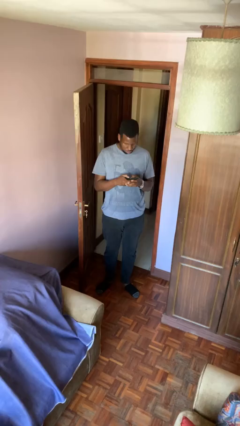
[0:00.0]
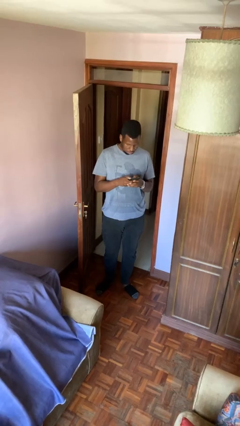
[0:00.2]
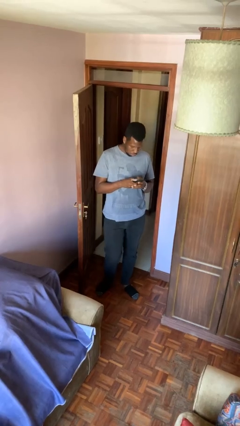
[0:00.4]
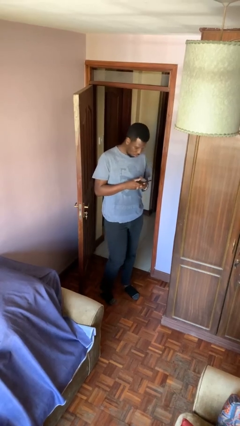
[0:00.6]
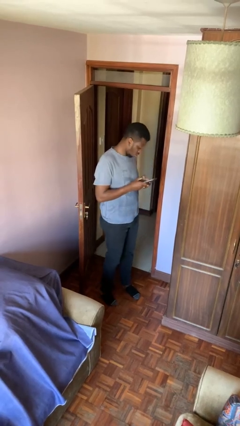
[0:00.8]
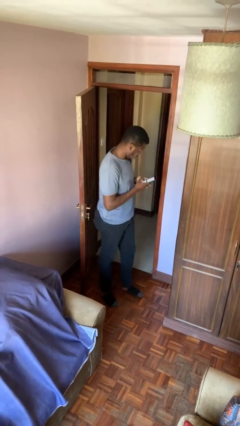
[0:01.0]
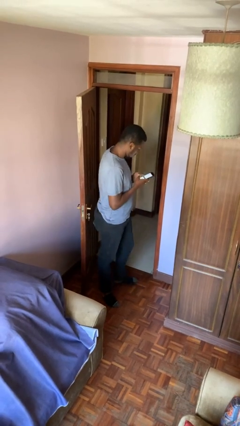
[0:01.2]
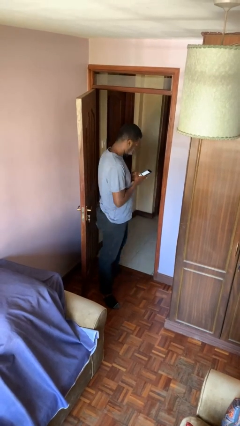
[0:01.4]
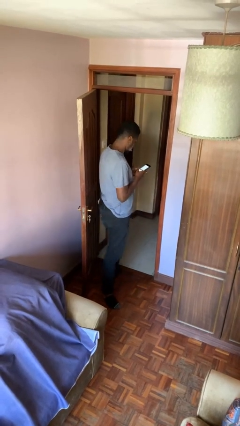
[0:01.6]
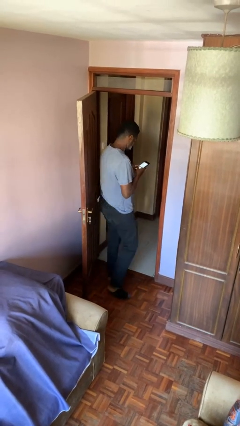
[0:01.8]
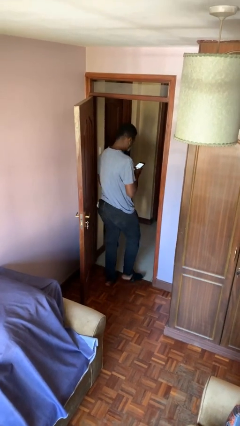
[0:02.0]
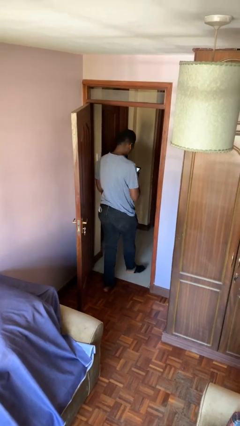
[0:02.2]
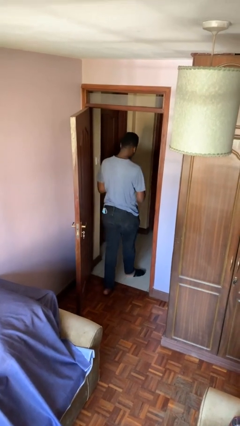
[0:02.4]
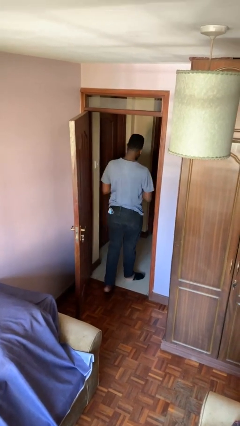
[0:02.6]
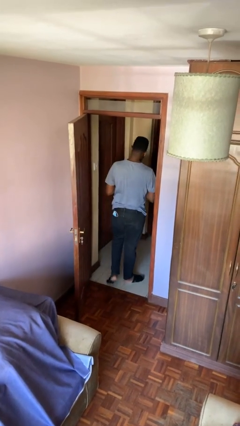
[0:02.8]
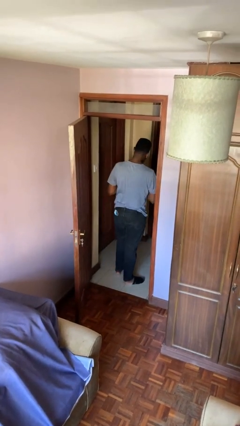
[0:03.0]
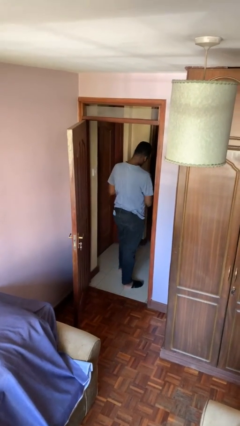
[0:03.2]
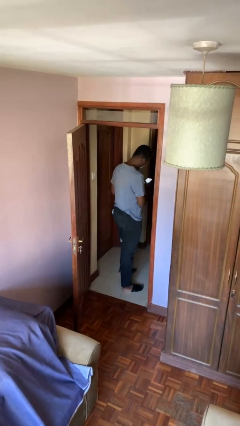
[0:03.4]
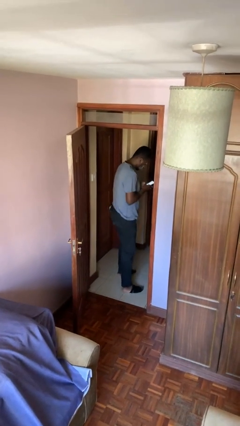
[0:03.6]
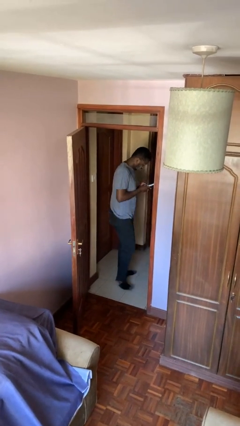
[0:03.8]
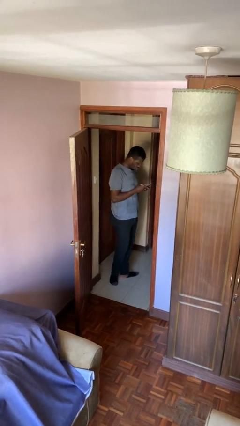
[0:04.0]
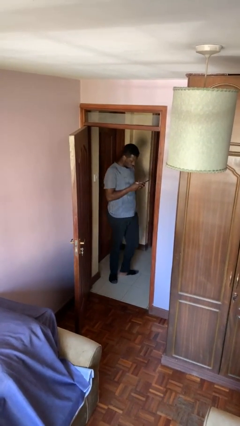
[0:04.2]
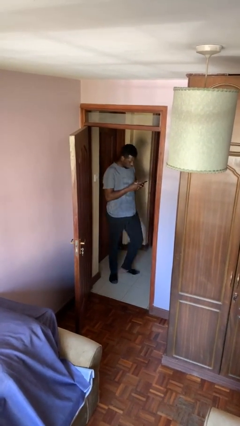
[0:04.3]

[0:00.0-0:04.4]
person exits scene through structure

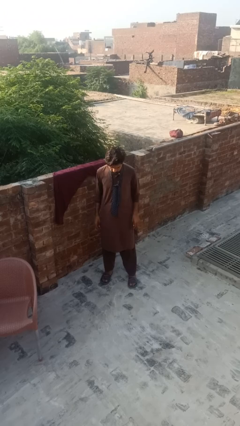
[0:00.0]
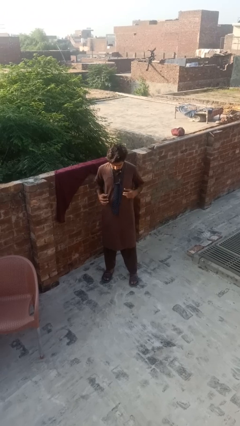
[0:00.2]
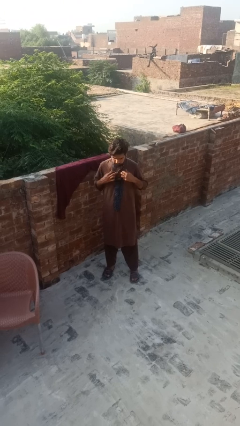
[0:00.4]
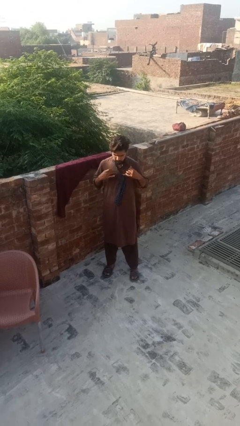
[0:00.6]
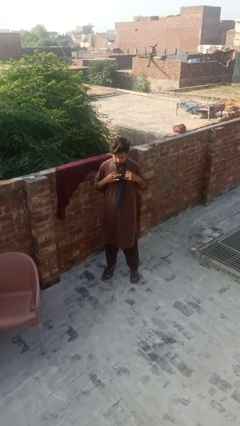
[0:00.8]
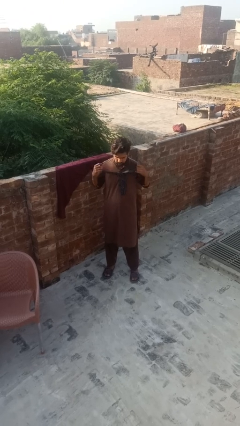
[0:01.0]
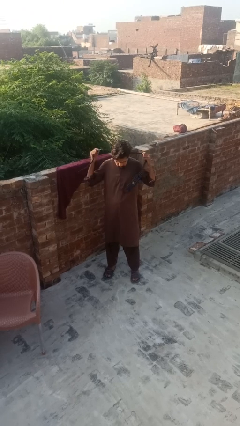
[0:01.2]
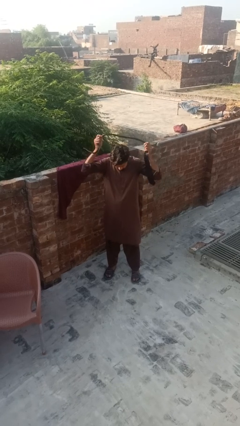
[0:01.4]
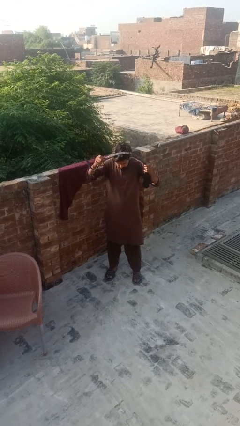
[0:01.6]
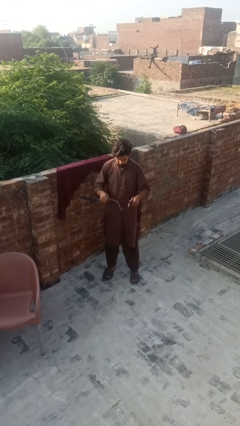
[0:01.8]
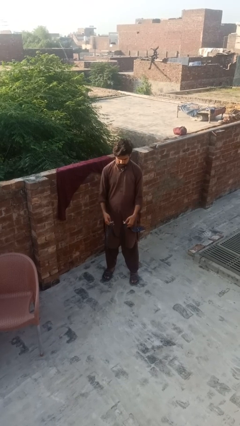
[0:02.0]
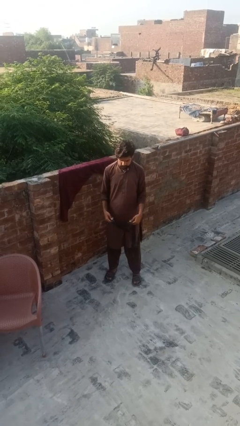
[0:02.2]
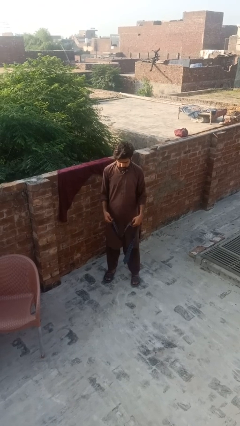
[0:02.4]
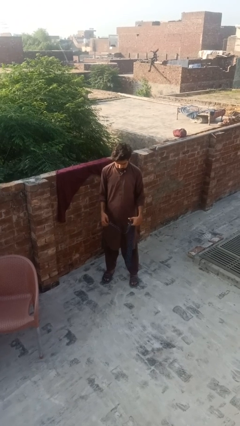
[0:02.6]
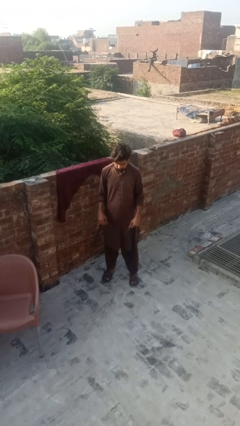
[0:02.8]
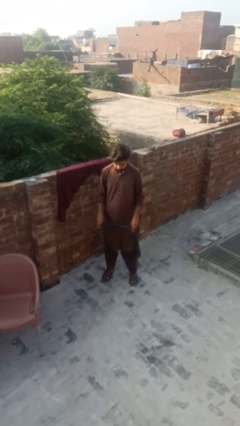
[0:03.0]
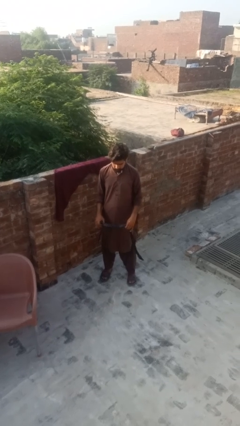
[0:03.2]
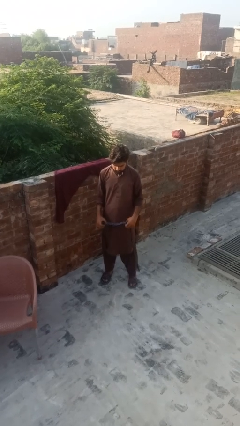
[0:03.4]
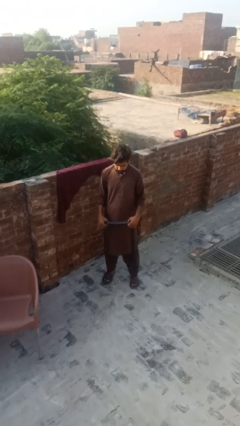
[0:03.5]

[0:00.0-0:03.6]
person takes off necktie

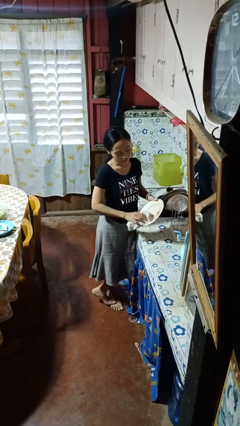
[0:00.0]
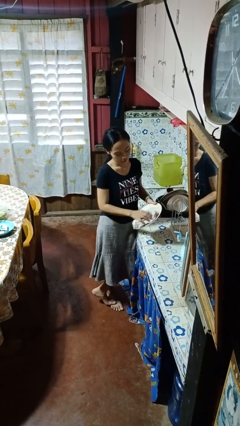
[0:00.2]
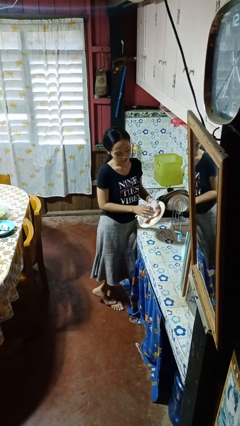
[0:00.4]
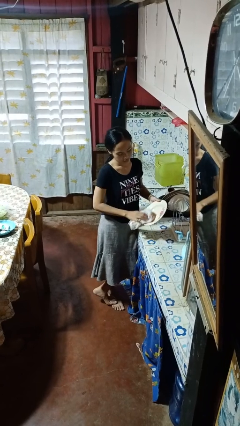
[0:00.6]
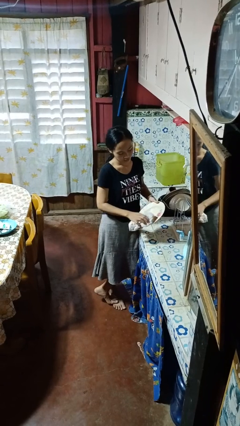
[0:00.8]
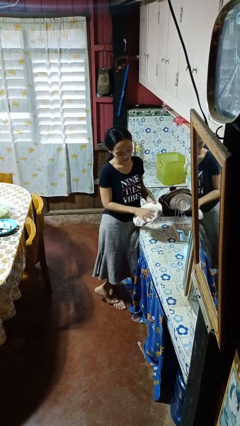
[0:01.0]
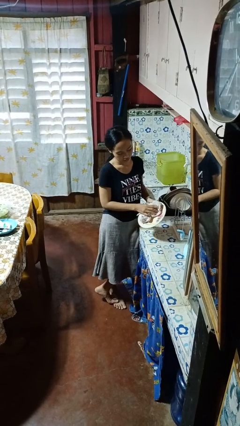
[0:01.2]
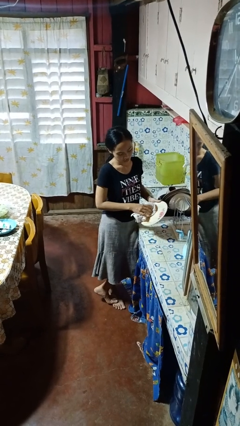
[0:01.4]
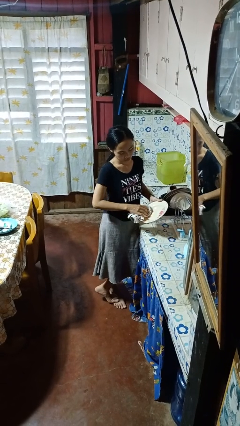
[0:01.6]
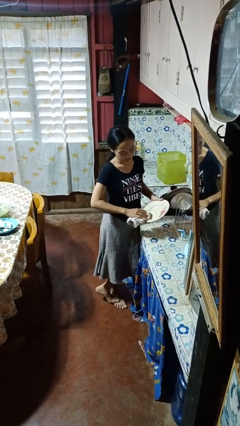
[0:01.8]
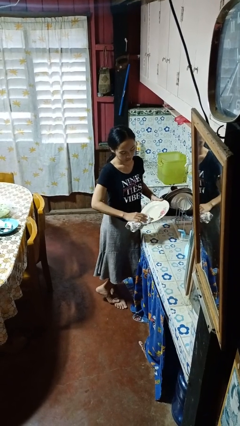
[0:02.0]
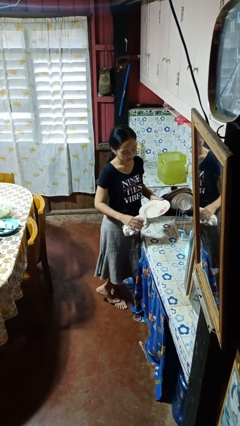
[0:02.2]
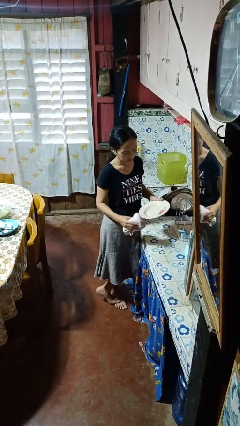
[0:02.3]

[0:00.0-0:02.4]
person dries dish

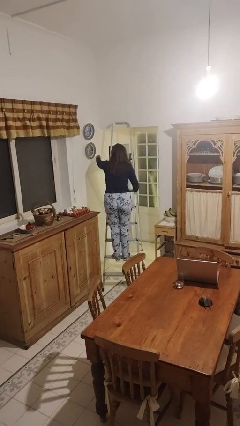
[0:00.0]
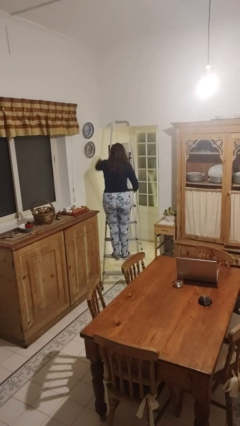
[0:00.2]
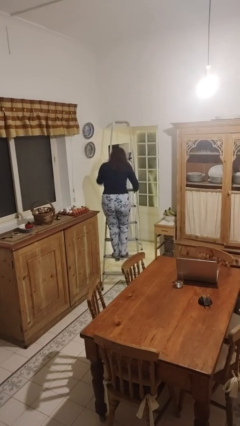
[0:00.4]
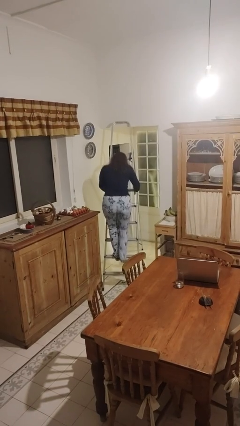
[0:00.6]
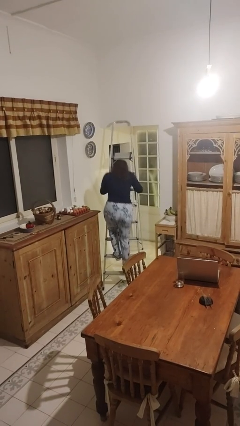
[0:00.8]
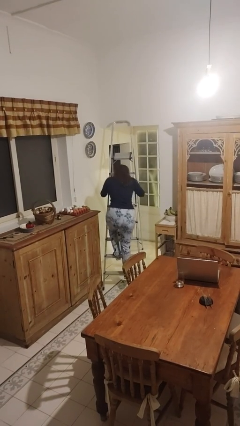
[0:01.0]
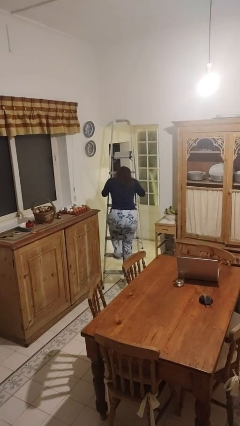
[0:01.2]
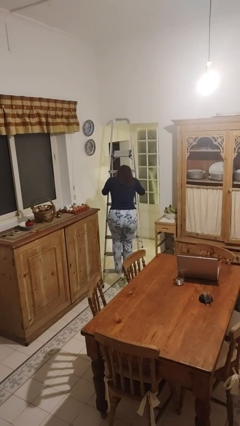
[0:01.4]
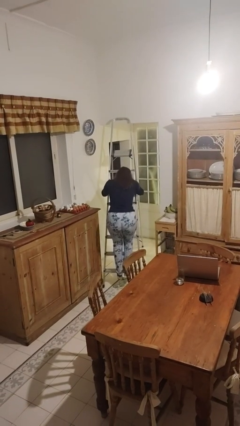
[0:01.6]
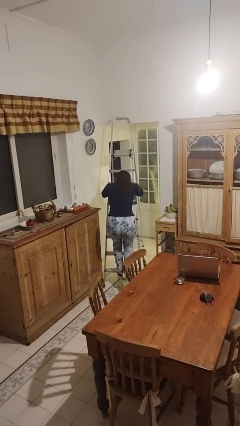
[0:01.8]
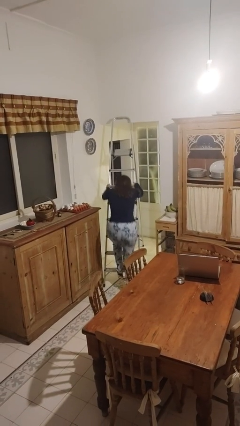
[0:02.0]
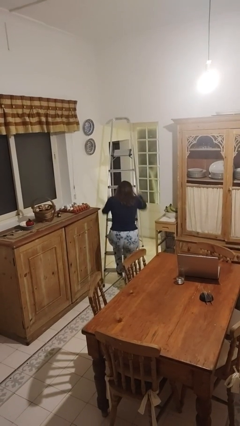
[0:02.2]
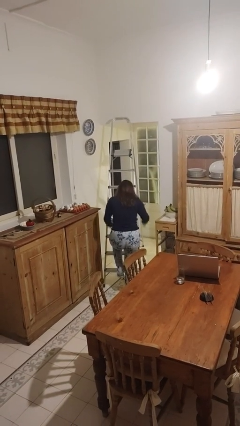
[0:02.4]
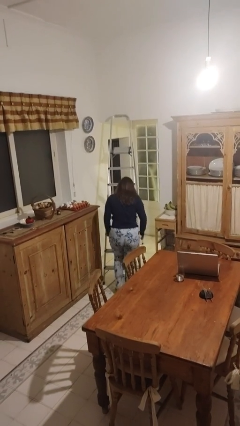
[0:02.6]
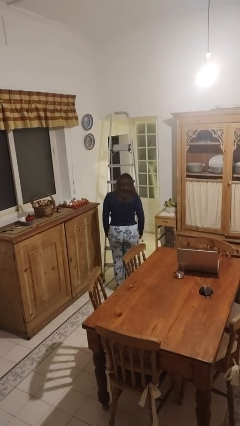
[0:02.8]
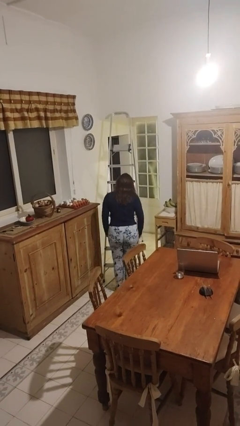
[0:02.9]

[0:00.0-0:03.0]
person climbs down ladder

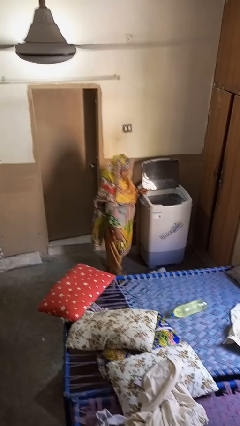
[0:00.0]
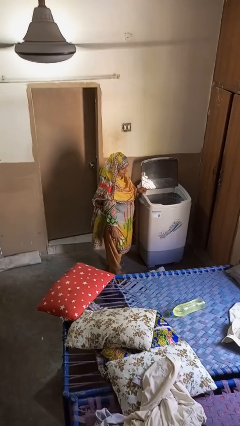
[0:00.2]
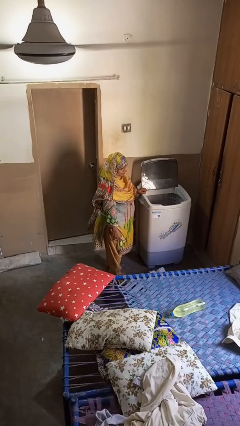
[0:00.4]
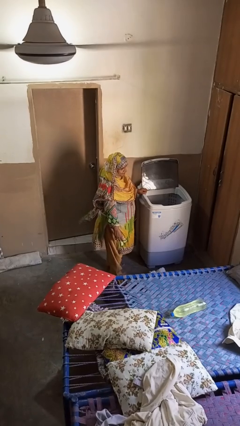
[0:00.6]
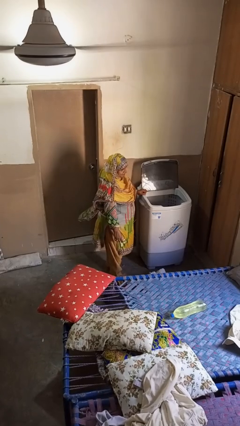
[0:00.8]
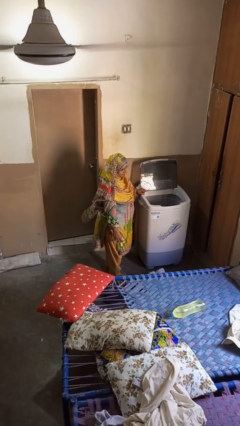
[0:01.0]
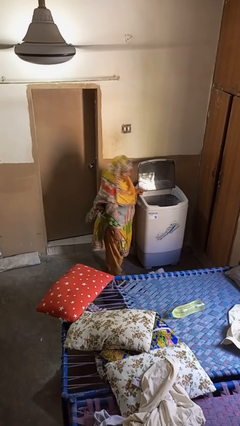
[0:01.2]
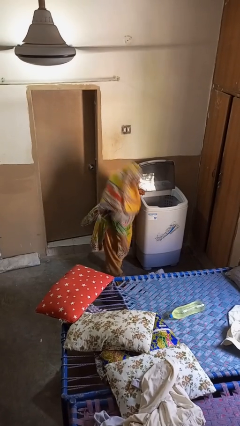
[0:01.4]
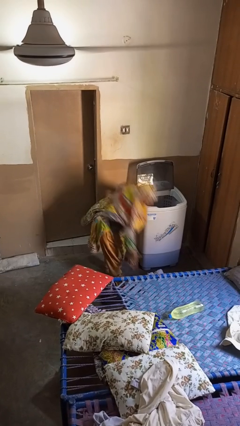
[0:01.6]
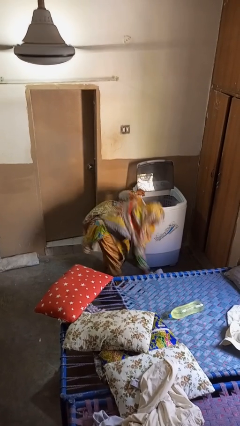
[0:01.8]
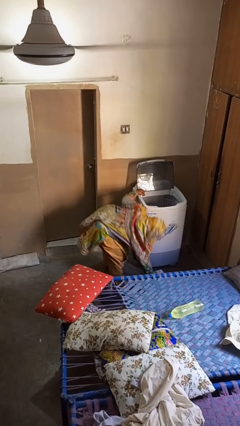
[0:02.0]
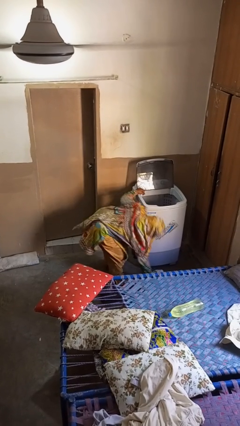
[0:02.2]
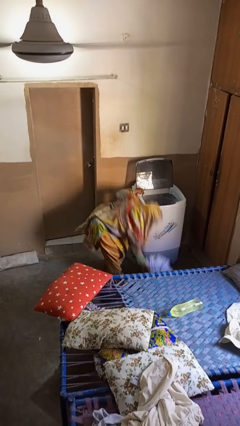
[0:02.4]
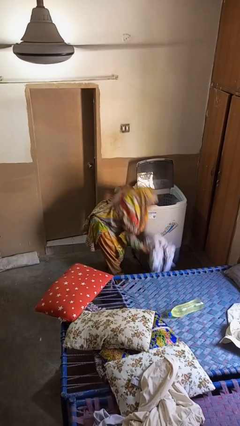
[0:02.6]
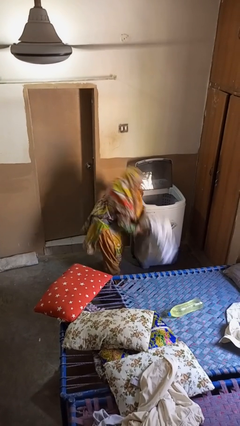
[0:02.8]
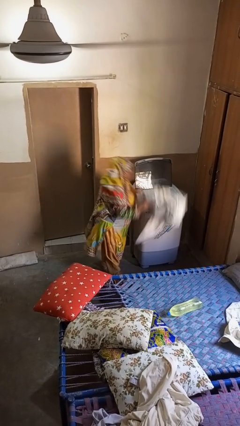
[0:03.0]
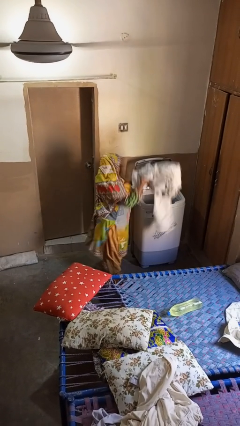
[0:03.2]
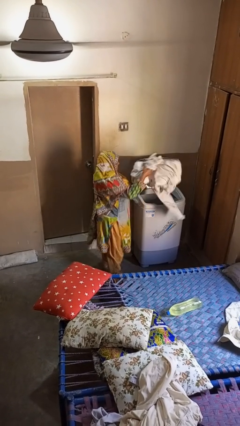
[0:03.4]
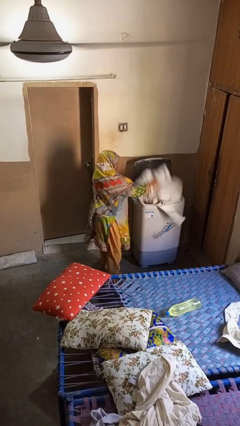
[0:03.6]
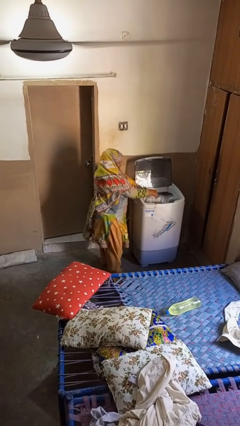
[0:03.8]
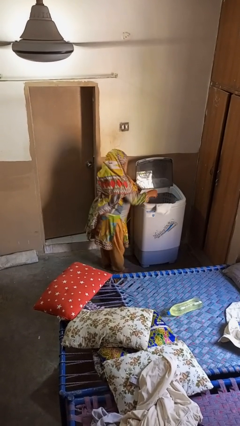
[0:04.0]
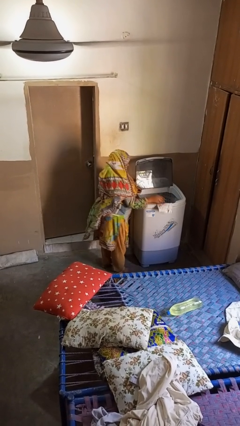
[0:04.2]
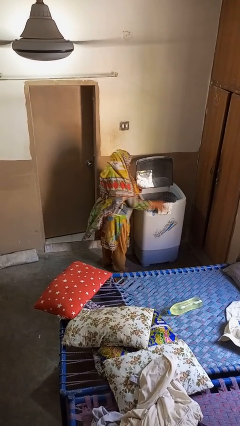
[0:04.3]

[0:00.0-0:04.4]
person loads clotheswasher
